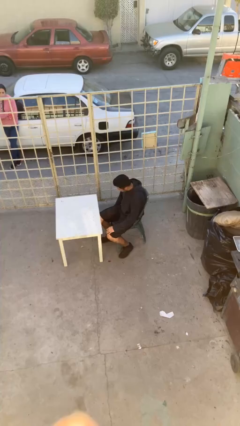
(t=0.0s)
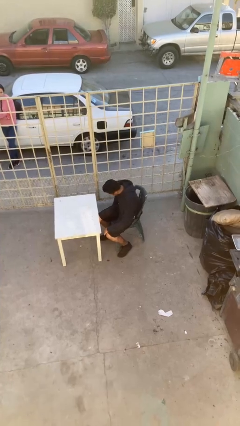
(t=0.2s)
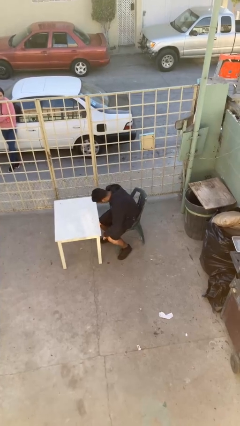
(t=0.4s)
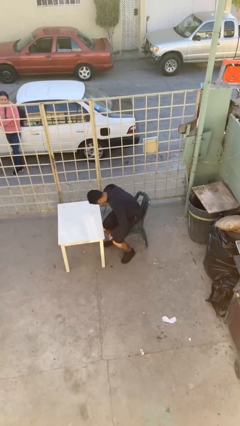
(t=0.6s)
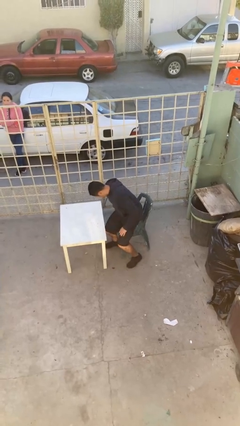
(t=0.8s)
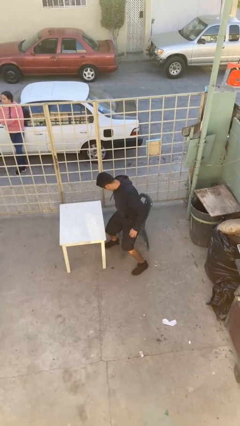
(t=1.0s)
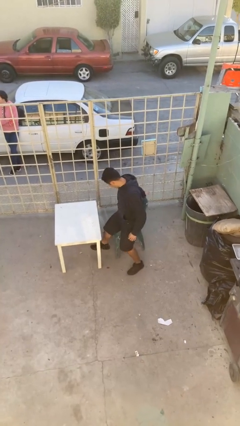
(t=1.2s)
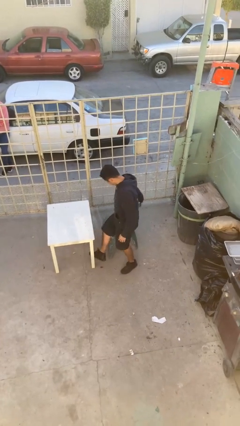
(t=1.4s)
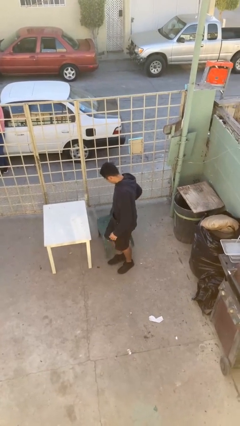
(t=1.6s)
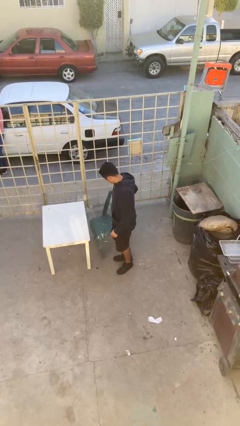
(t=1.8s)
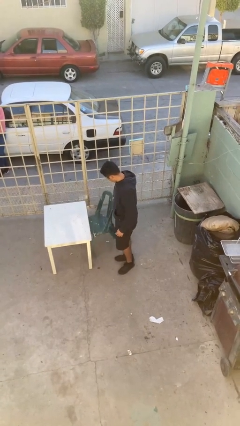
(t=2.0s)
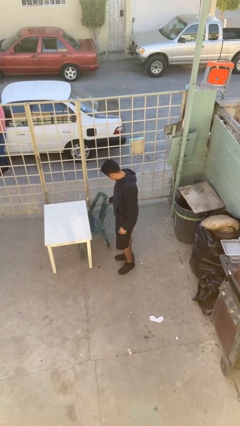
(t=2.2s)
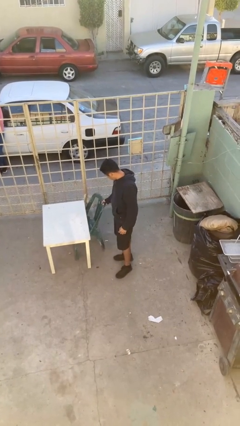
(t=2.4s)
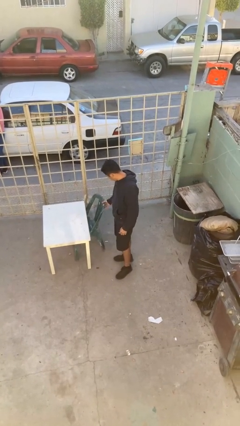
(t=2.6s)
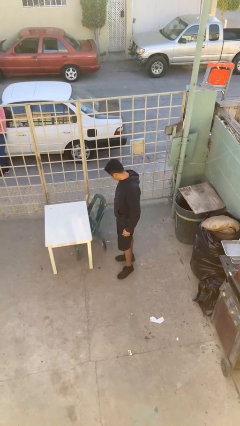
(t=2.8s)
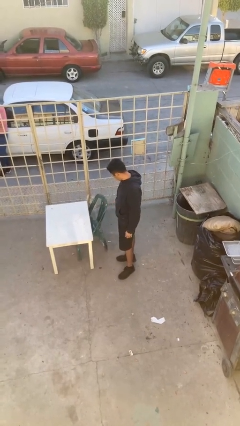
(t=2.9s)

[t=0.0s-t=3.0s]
person stands up

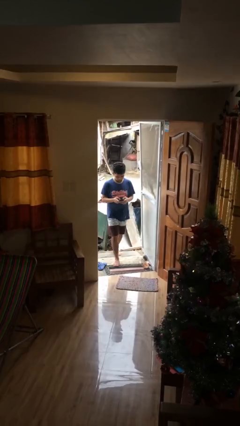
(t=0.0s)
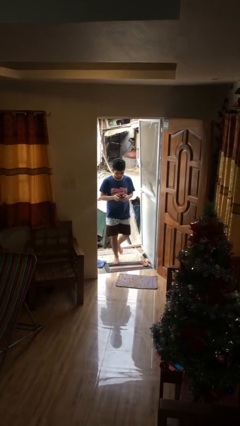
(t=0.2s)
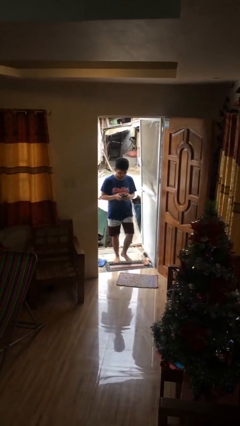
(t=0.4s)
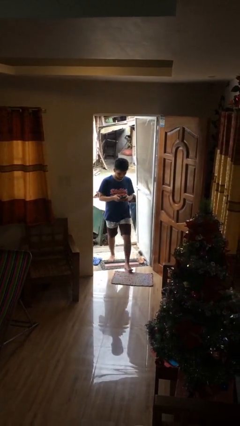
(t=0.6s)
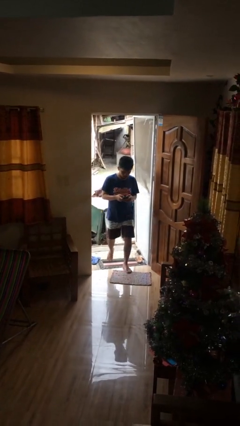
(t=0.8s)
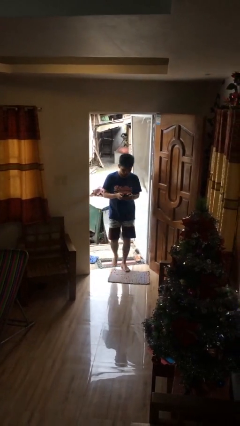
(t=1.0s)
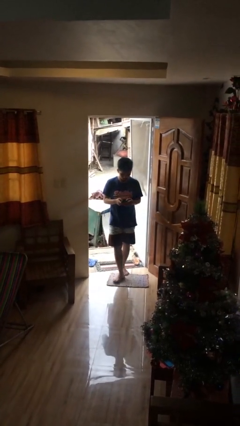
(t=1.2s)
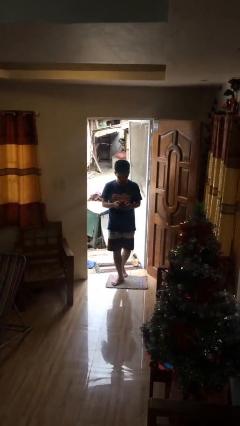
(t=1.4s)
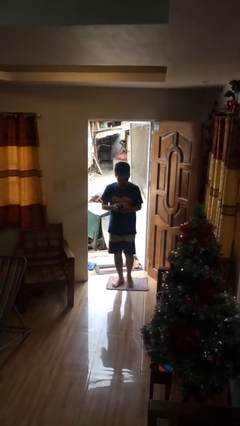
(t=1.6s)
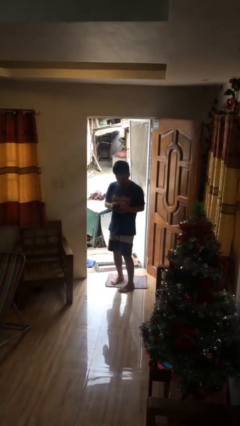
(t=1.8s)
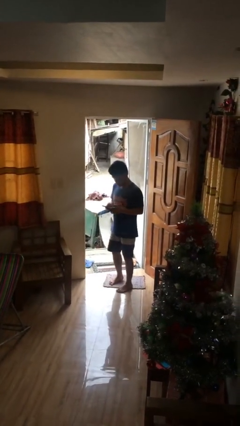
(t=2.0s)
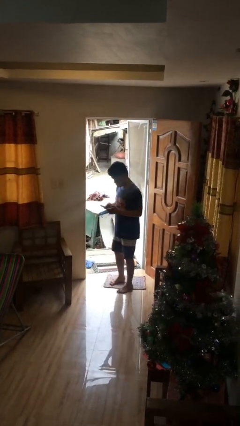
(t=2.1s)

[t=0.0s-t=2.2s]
person enters scene through structure

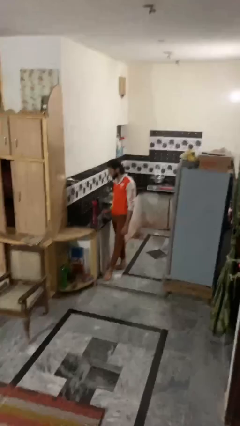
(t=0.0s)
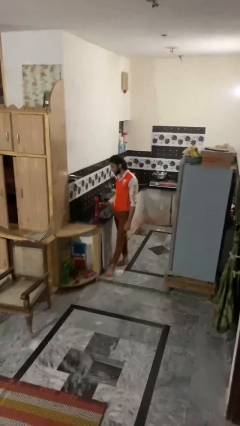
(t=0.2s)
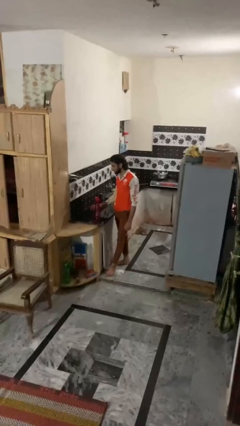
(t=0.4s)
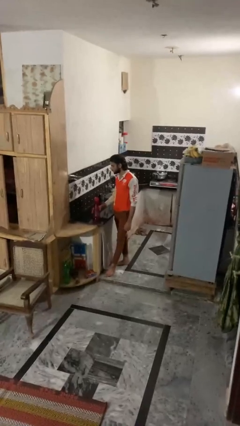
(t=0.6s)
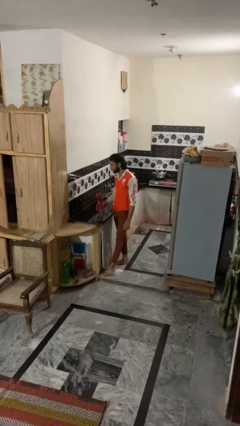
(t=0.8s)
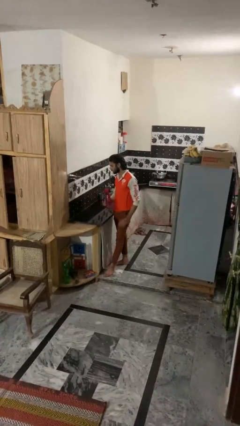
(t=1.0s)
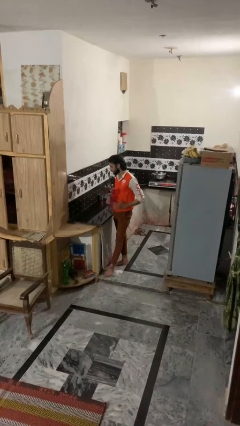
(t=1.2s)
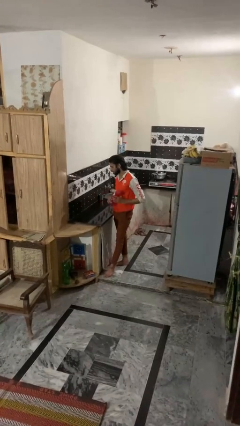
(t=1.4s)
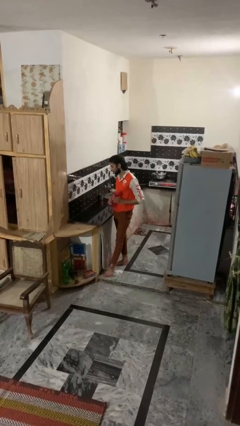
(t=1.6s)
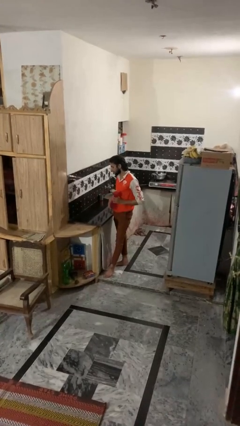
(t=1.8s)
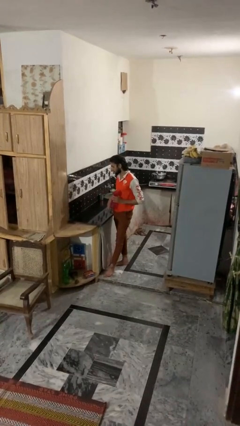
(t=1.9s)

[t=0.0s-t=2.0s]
person picks up object from countertop

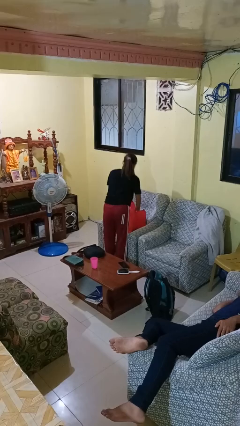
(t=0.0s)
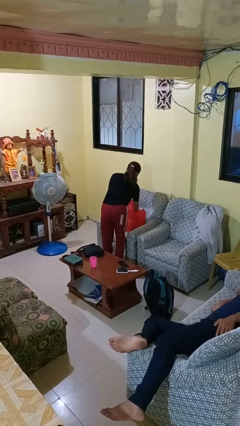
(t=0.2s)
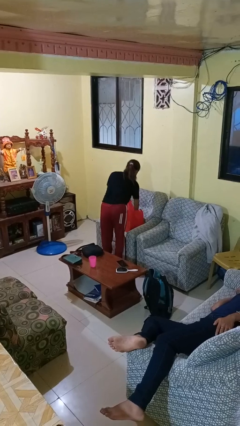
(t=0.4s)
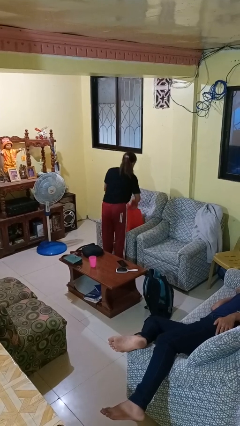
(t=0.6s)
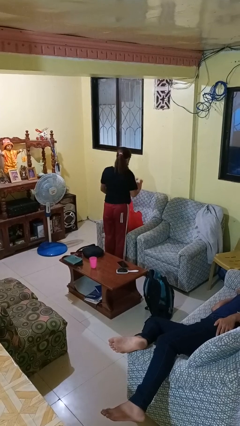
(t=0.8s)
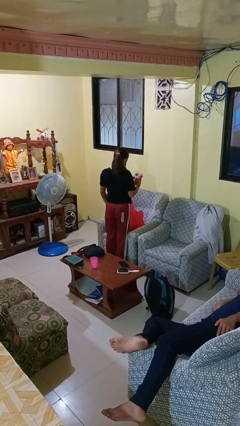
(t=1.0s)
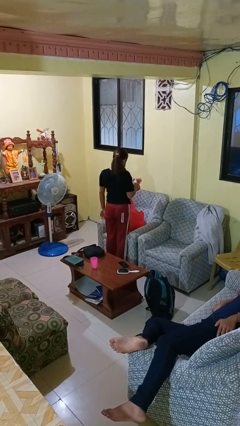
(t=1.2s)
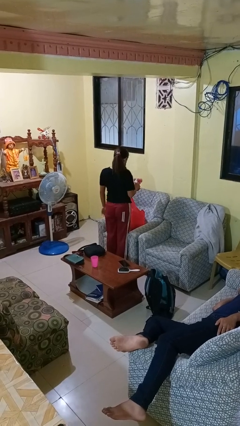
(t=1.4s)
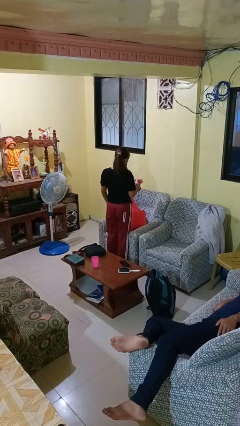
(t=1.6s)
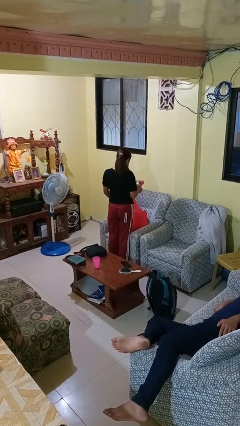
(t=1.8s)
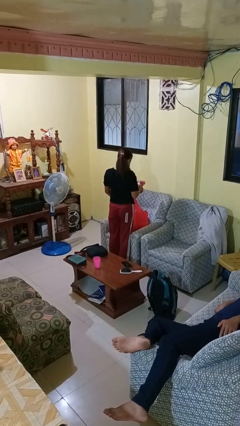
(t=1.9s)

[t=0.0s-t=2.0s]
person takes object from bag

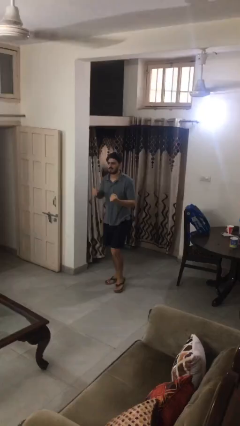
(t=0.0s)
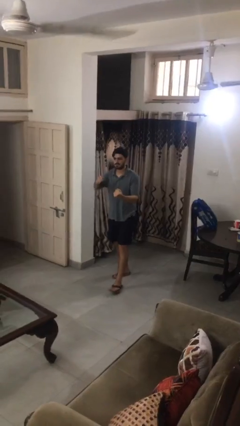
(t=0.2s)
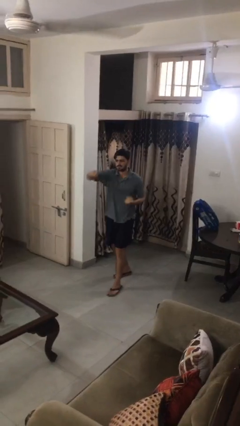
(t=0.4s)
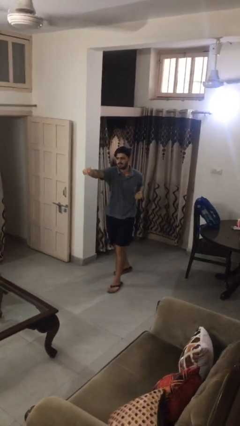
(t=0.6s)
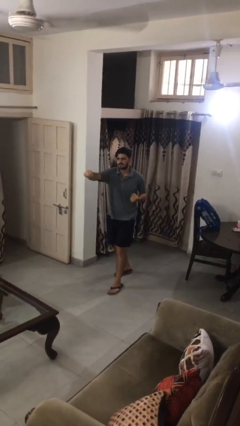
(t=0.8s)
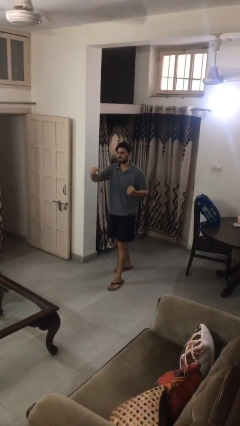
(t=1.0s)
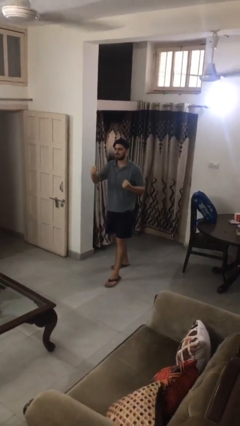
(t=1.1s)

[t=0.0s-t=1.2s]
person punches

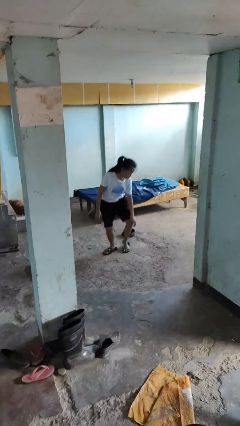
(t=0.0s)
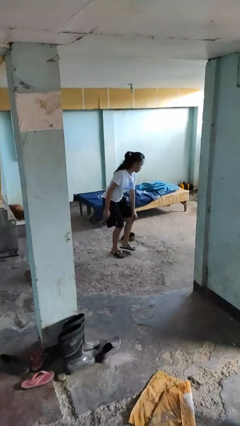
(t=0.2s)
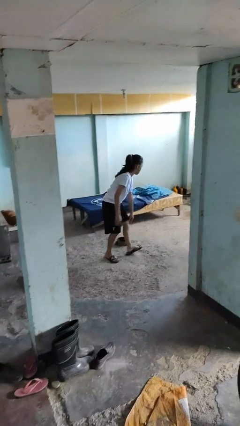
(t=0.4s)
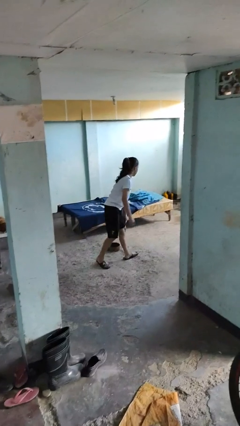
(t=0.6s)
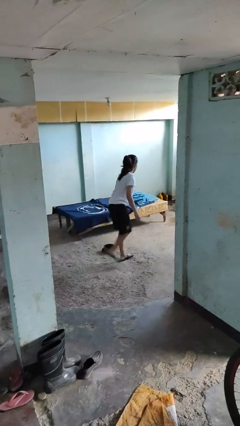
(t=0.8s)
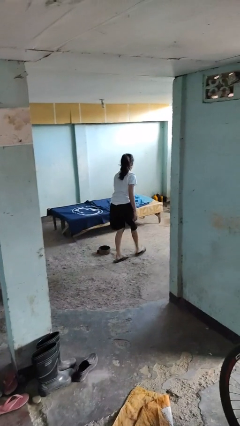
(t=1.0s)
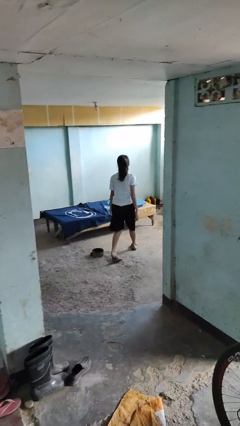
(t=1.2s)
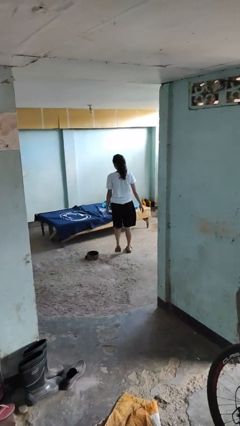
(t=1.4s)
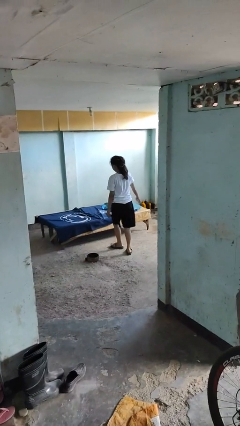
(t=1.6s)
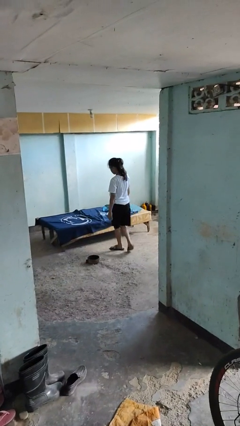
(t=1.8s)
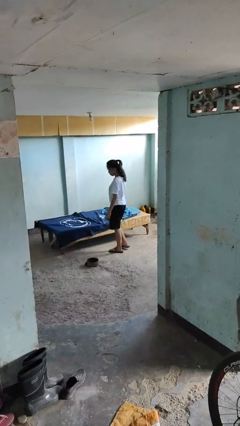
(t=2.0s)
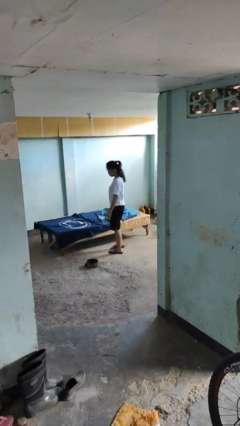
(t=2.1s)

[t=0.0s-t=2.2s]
person stands up from floor

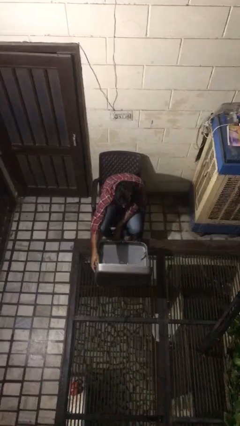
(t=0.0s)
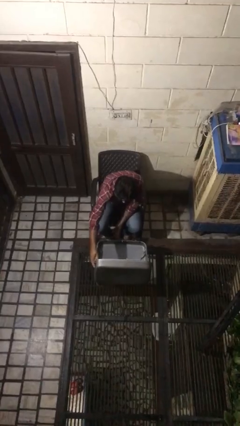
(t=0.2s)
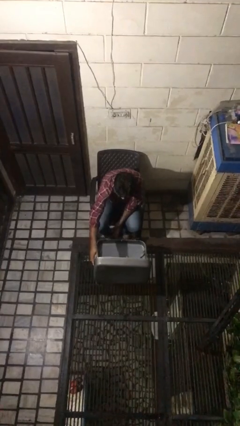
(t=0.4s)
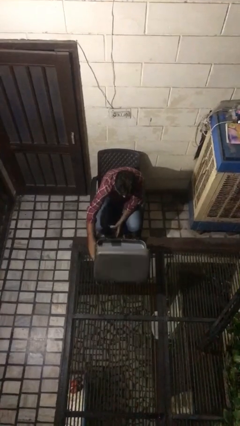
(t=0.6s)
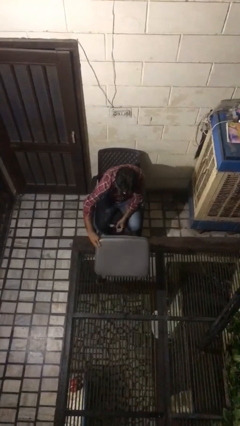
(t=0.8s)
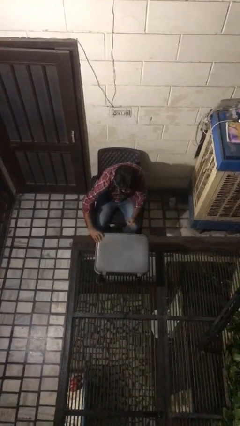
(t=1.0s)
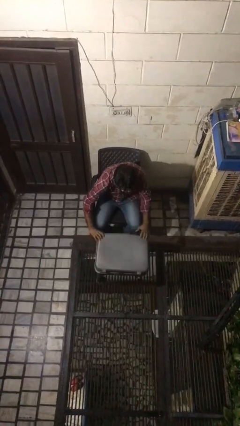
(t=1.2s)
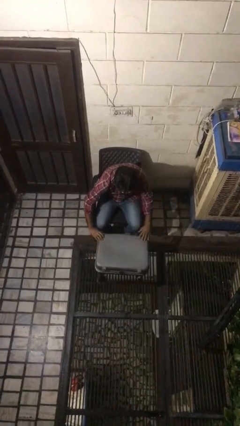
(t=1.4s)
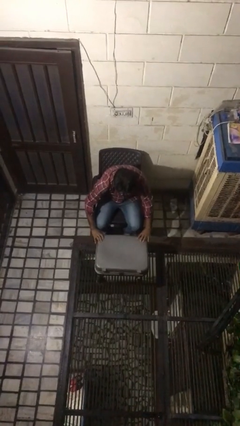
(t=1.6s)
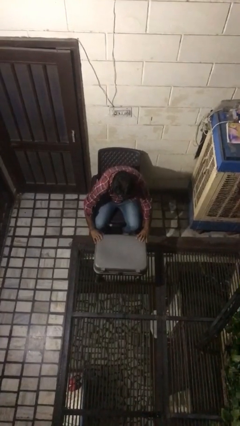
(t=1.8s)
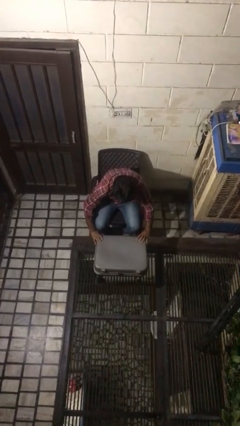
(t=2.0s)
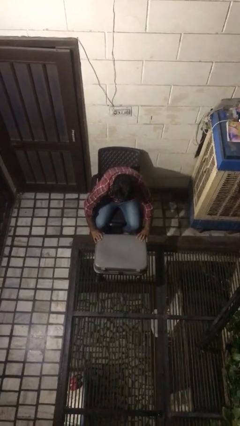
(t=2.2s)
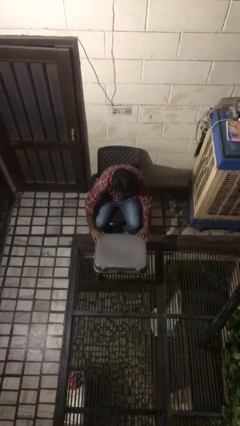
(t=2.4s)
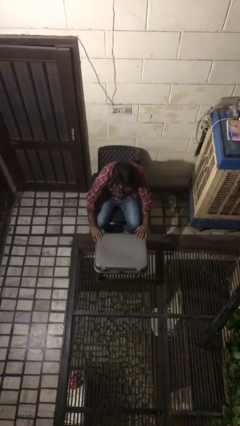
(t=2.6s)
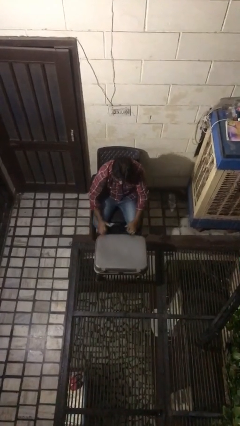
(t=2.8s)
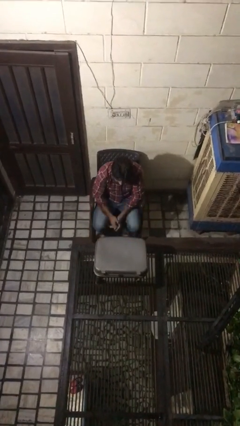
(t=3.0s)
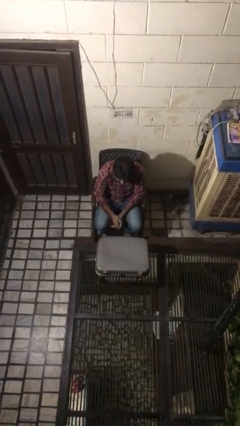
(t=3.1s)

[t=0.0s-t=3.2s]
person closes suitcase

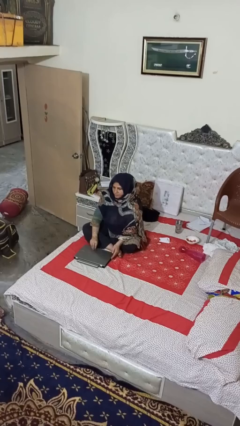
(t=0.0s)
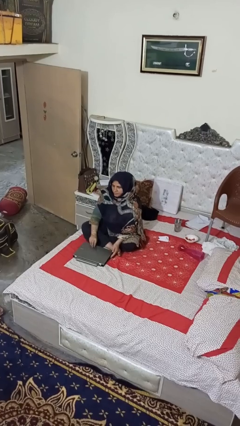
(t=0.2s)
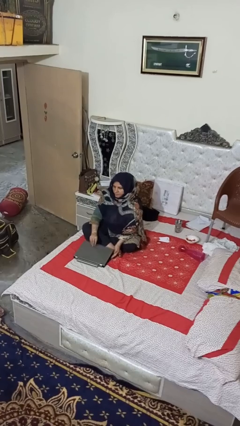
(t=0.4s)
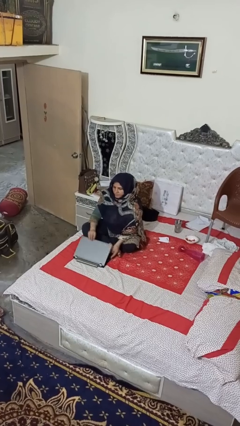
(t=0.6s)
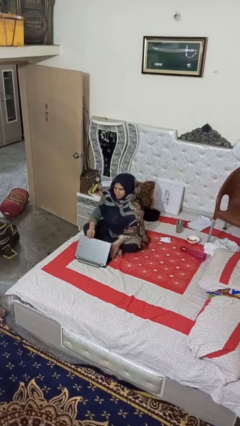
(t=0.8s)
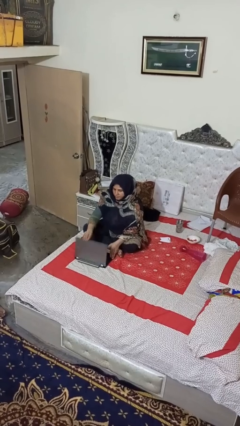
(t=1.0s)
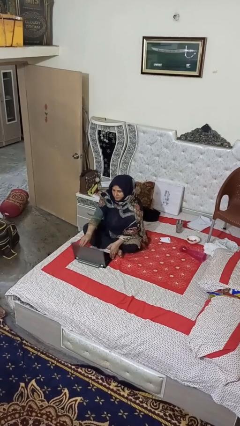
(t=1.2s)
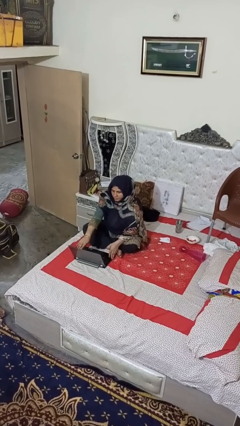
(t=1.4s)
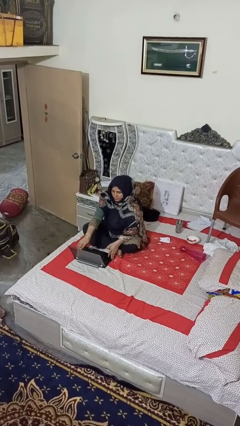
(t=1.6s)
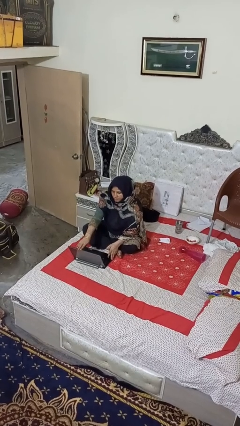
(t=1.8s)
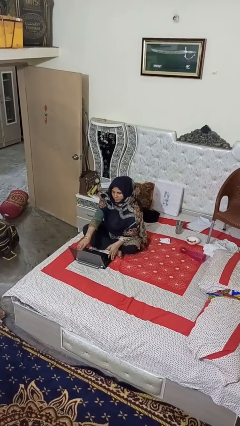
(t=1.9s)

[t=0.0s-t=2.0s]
person opens laptop
